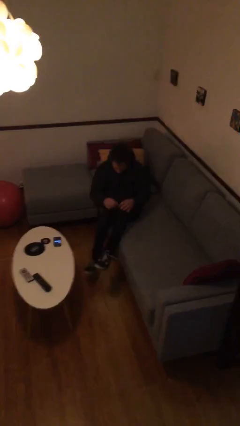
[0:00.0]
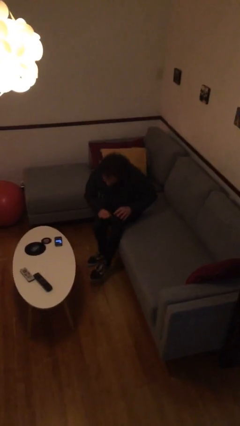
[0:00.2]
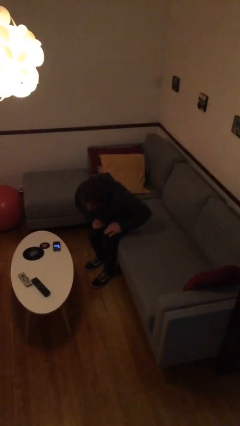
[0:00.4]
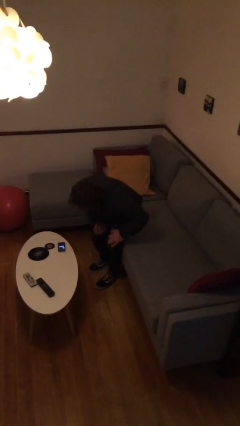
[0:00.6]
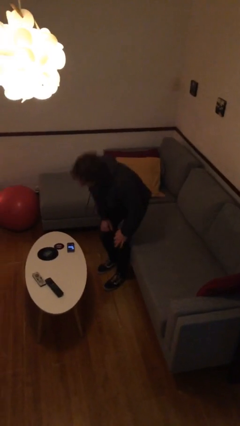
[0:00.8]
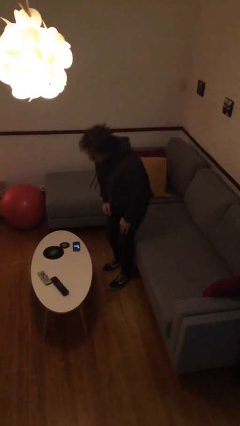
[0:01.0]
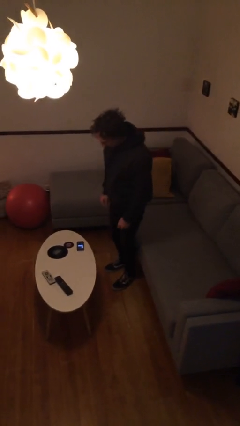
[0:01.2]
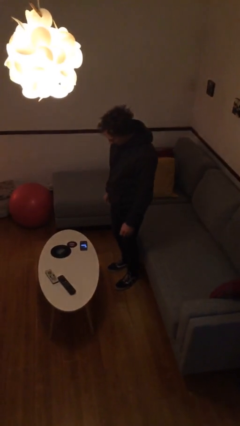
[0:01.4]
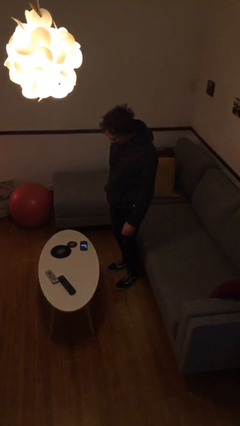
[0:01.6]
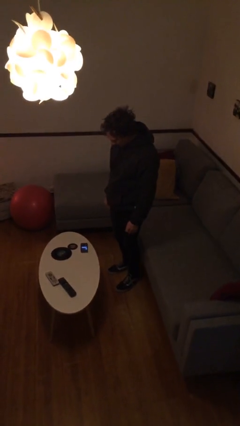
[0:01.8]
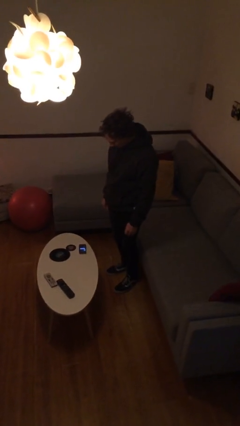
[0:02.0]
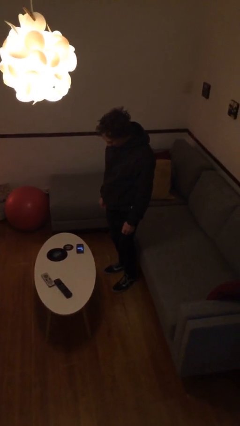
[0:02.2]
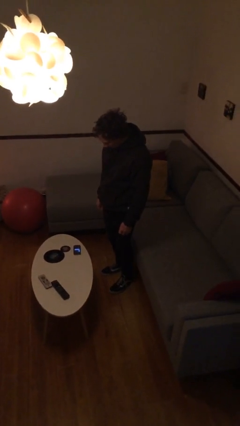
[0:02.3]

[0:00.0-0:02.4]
person stands up

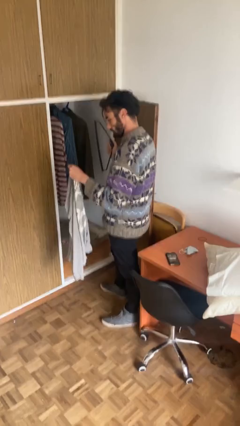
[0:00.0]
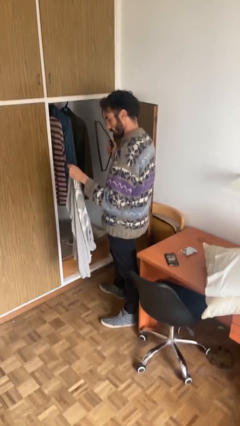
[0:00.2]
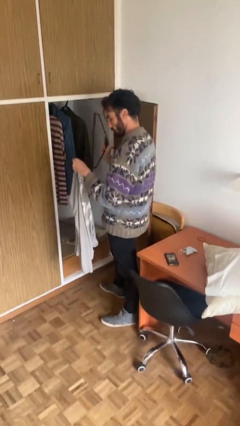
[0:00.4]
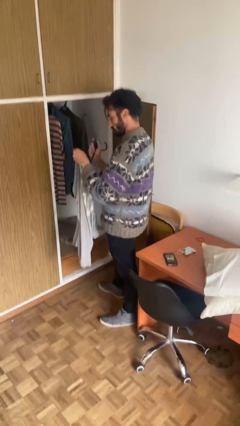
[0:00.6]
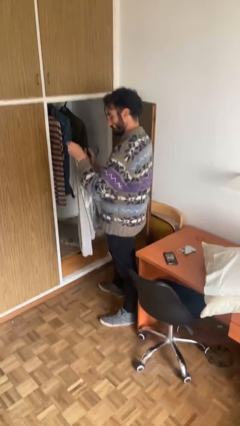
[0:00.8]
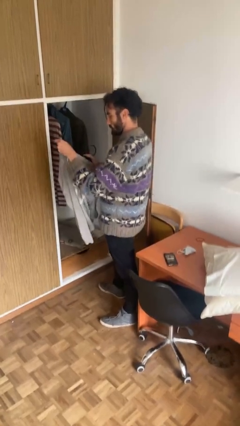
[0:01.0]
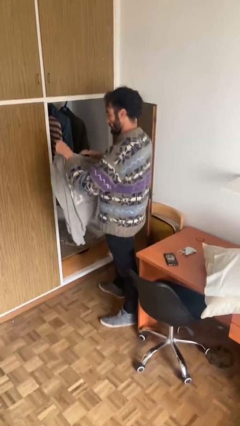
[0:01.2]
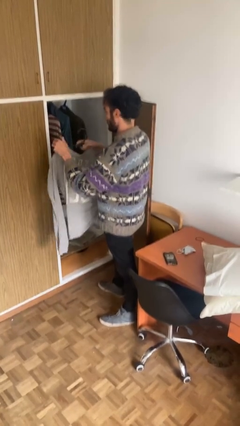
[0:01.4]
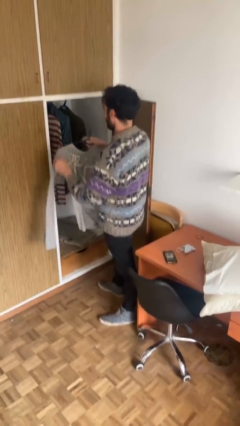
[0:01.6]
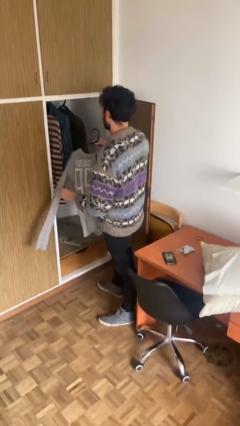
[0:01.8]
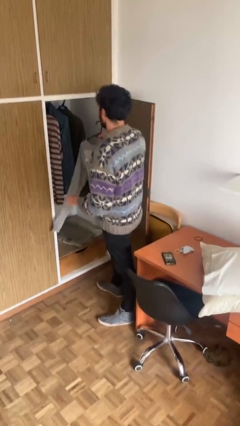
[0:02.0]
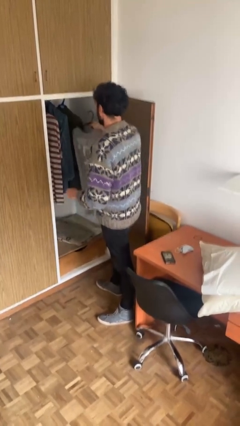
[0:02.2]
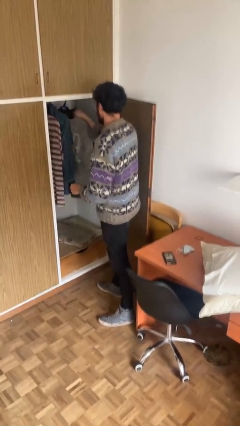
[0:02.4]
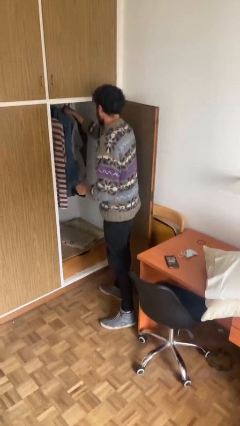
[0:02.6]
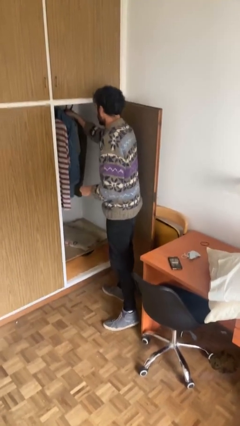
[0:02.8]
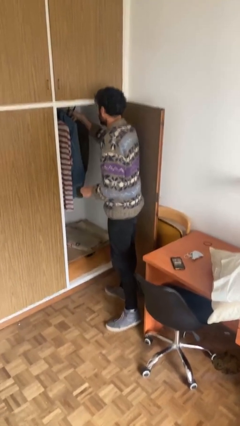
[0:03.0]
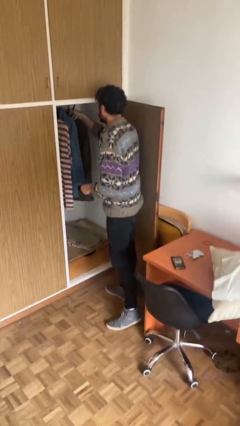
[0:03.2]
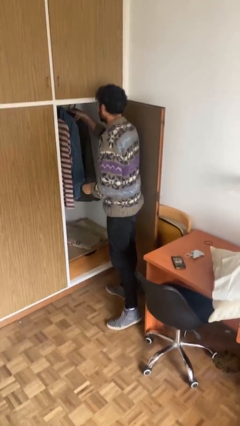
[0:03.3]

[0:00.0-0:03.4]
person puts clothes into closet

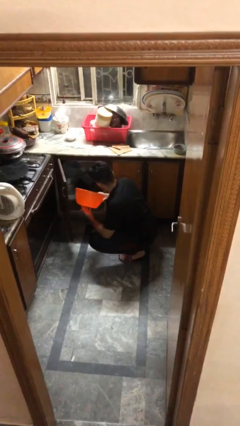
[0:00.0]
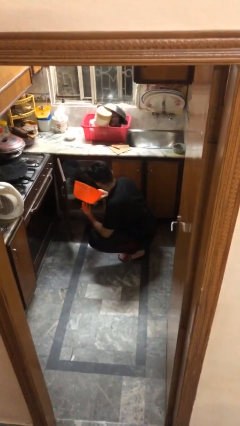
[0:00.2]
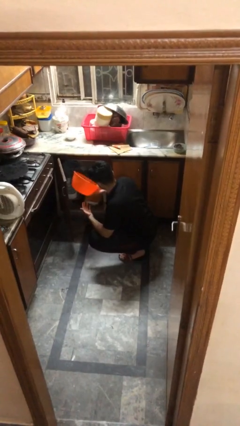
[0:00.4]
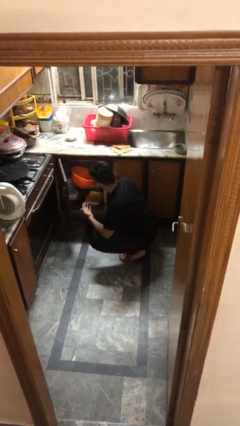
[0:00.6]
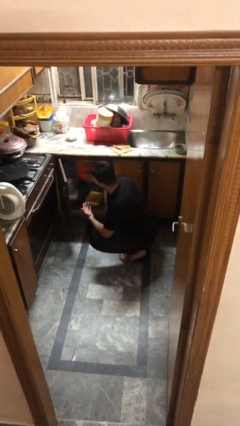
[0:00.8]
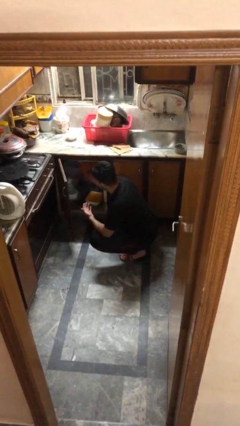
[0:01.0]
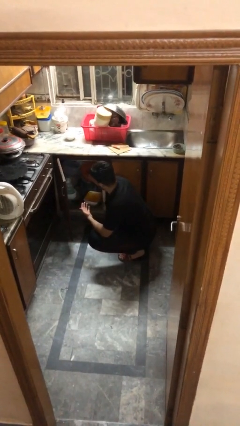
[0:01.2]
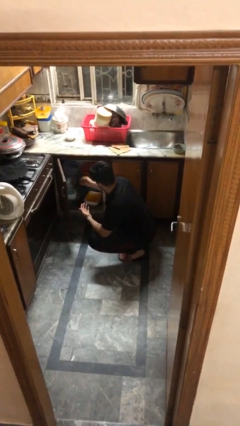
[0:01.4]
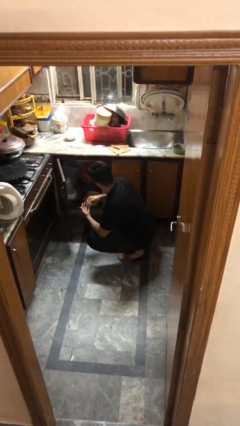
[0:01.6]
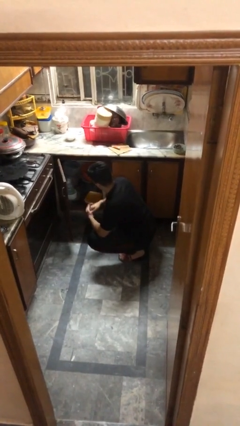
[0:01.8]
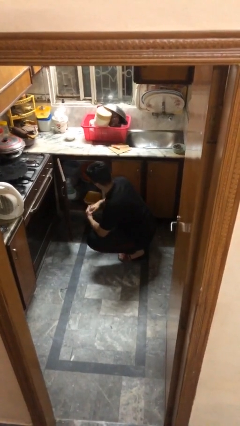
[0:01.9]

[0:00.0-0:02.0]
person puts object into kitchen drawer

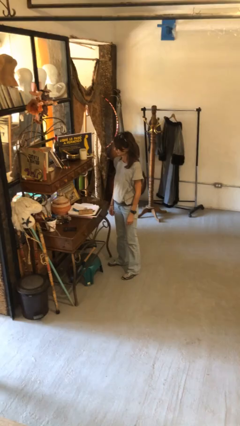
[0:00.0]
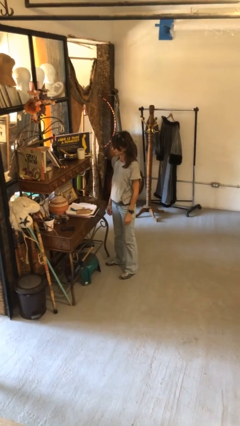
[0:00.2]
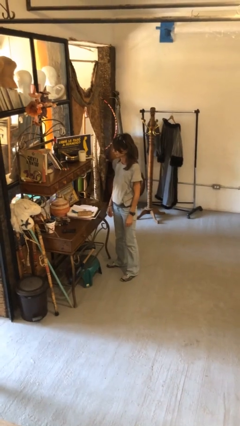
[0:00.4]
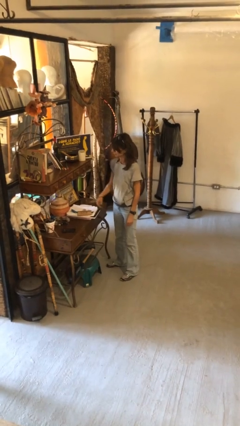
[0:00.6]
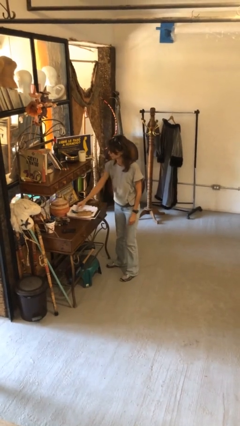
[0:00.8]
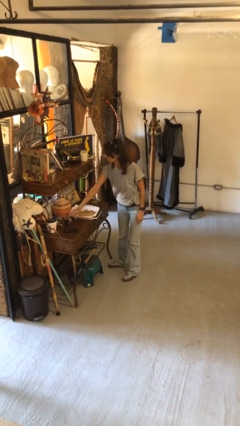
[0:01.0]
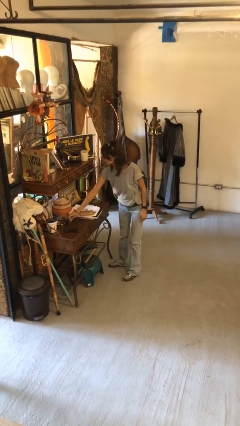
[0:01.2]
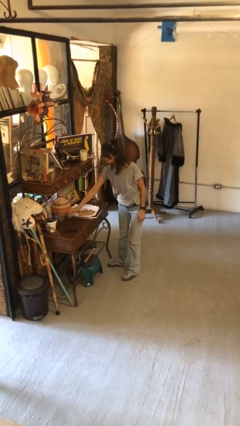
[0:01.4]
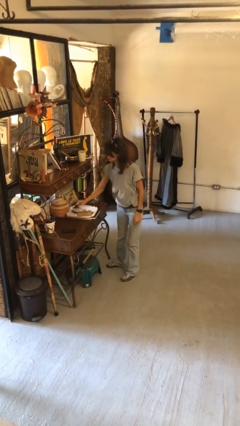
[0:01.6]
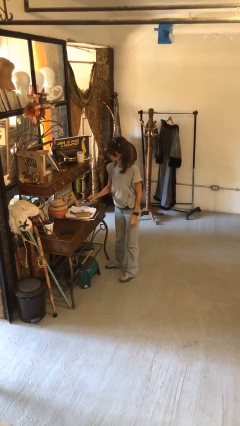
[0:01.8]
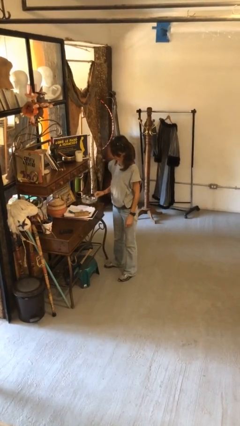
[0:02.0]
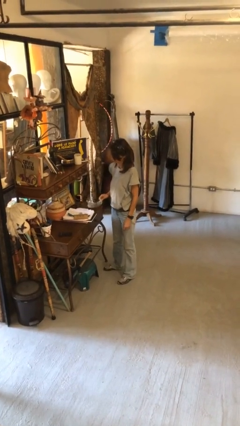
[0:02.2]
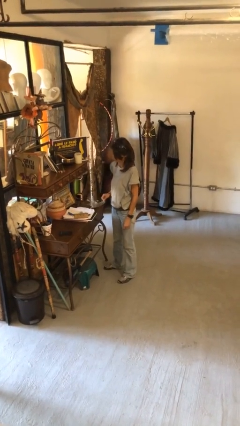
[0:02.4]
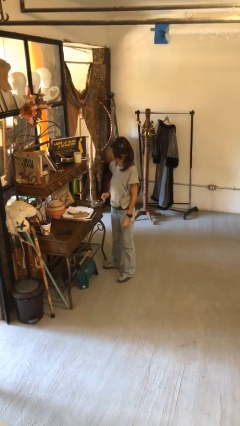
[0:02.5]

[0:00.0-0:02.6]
person picks up object from countertop

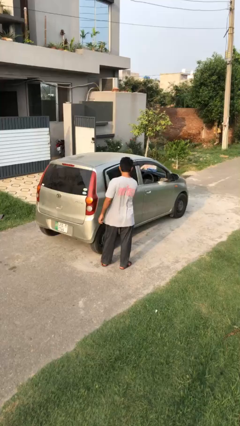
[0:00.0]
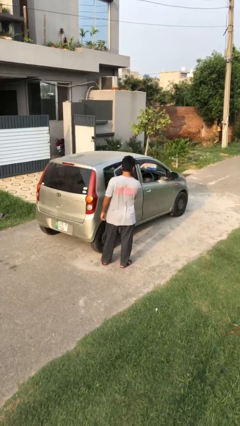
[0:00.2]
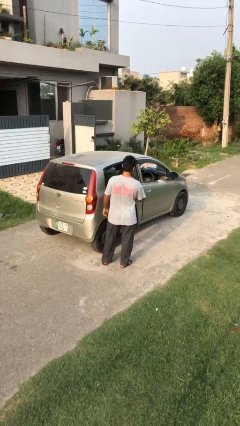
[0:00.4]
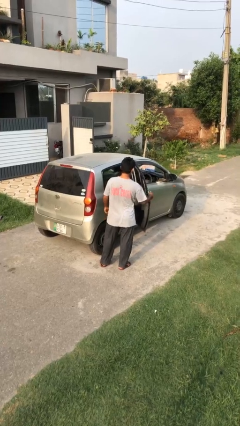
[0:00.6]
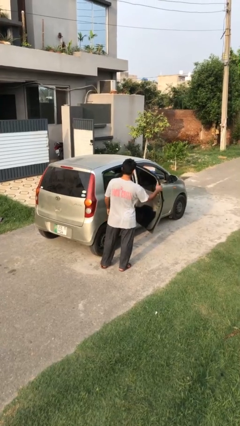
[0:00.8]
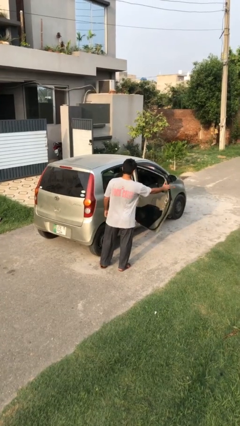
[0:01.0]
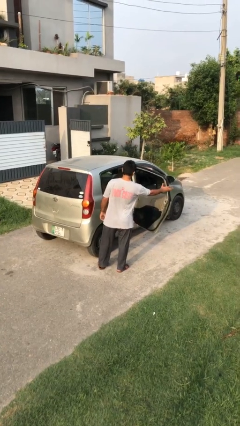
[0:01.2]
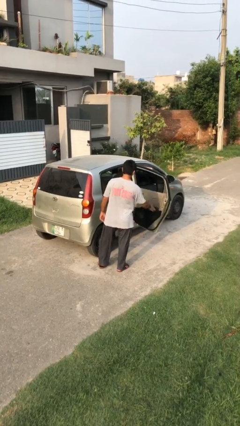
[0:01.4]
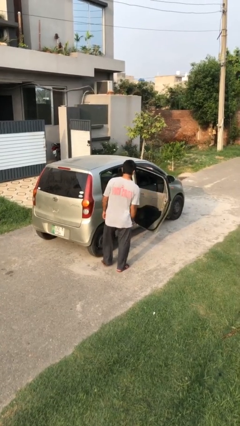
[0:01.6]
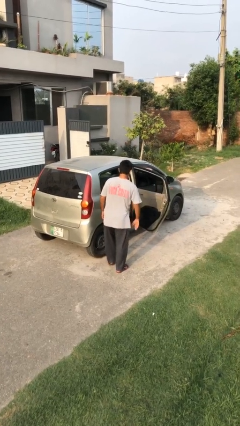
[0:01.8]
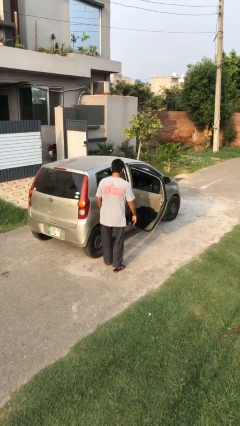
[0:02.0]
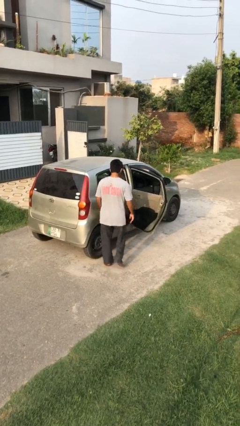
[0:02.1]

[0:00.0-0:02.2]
person opens car door

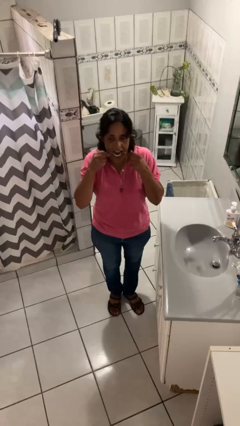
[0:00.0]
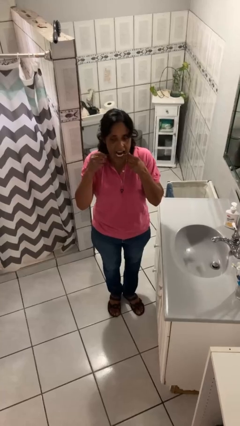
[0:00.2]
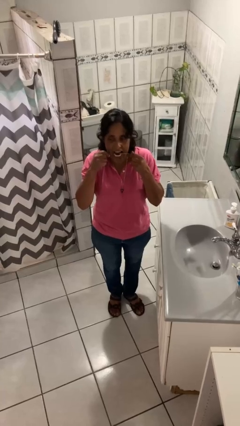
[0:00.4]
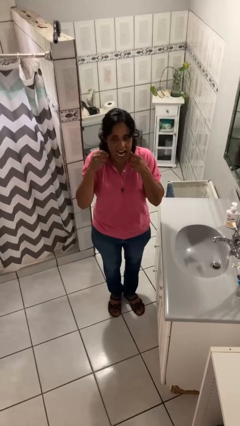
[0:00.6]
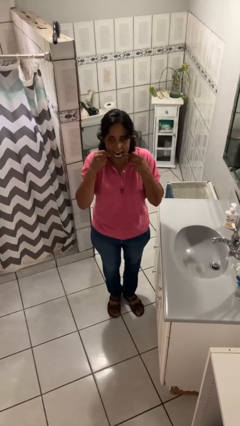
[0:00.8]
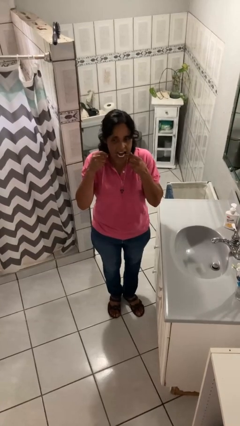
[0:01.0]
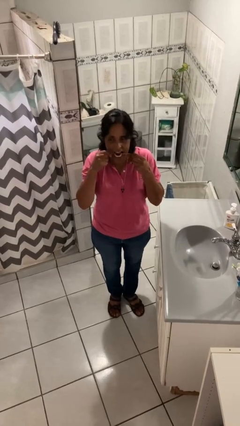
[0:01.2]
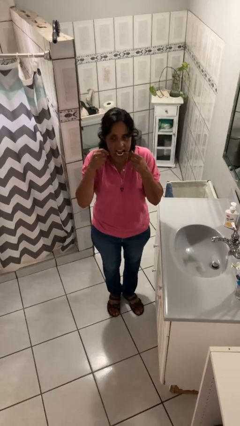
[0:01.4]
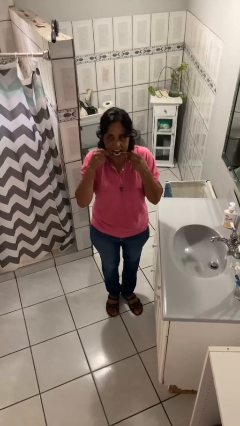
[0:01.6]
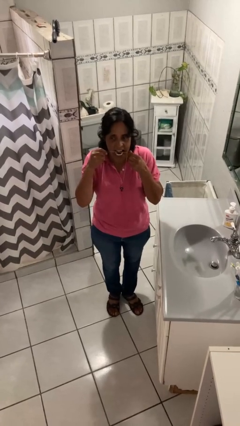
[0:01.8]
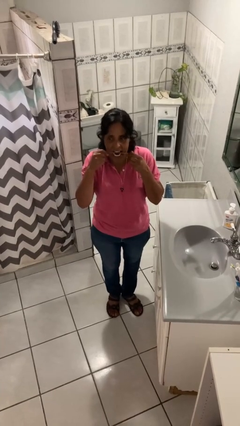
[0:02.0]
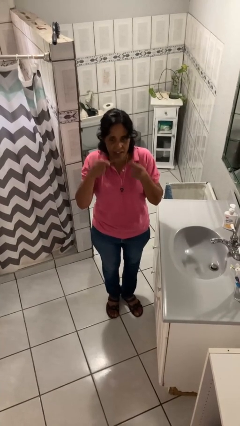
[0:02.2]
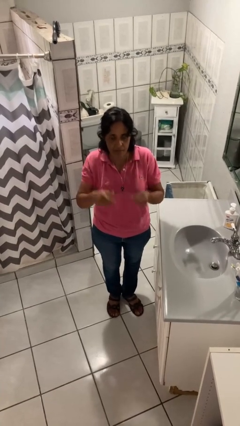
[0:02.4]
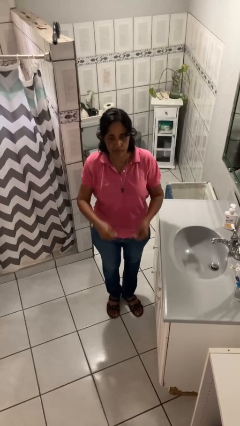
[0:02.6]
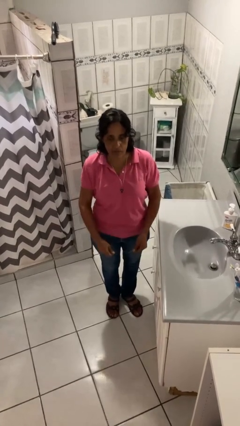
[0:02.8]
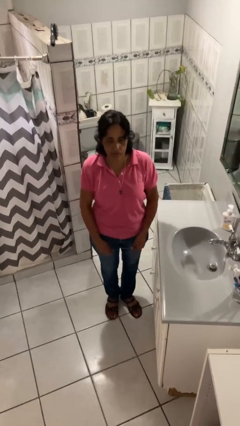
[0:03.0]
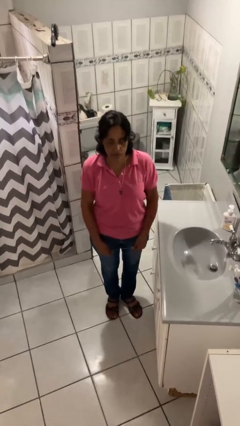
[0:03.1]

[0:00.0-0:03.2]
person flosses

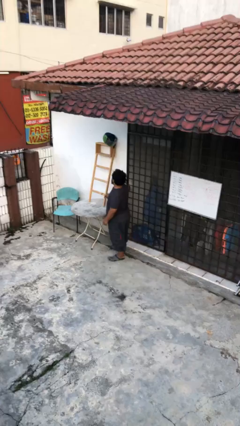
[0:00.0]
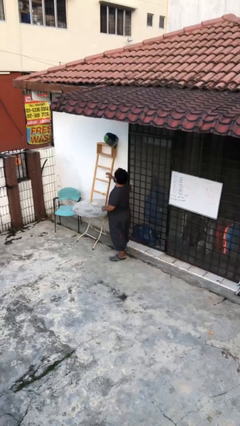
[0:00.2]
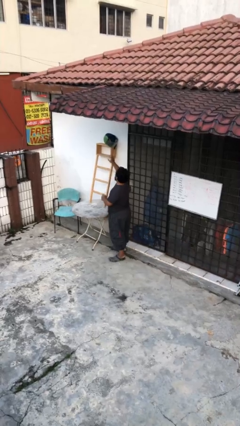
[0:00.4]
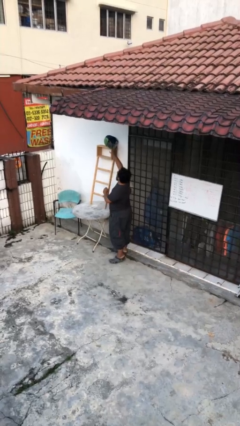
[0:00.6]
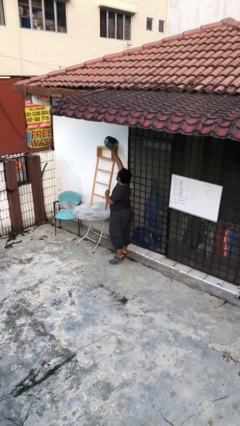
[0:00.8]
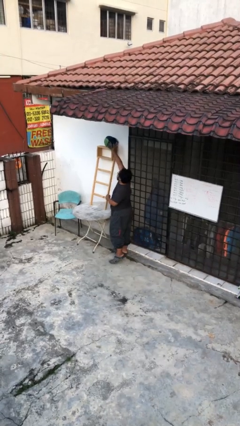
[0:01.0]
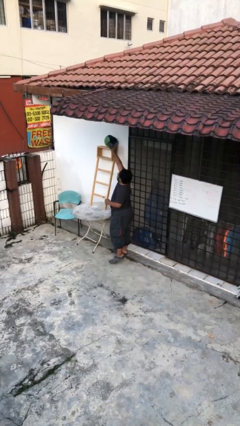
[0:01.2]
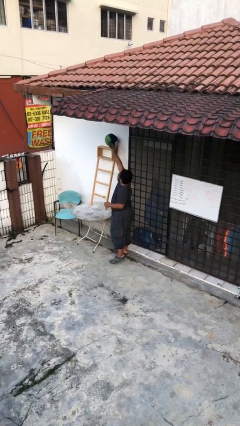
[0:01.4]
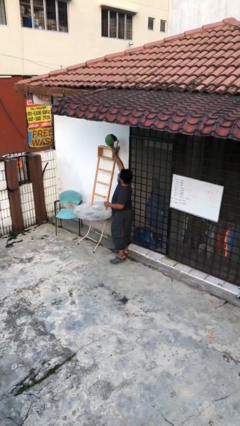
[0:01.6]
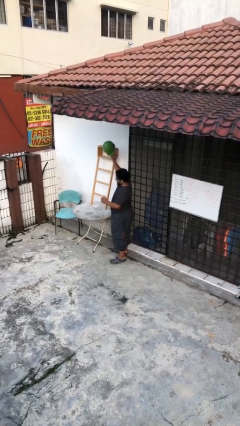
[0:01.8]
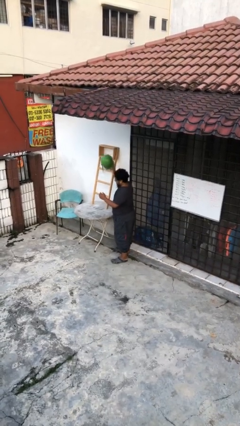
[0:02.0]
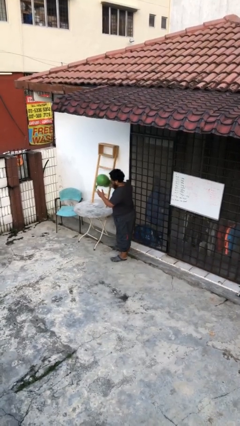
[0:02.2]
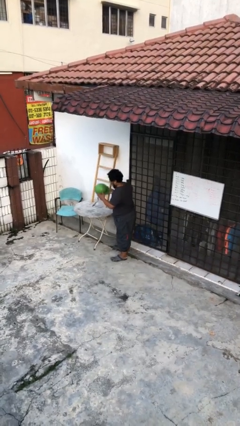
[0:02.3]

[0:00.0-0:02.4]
person picks up object from shelf
